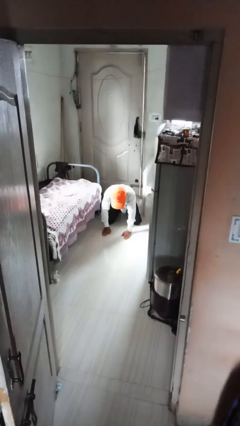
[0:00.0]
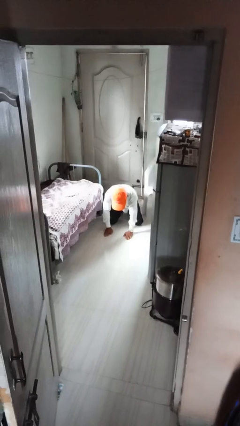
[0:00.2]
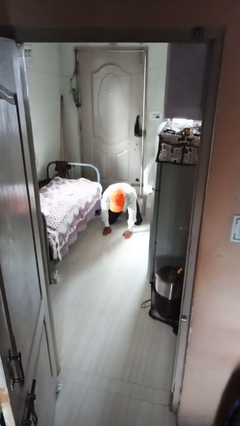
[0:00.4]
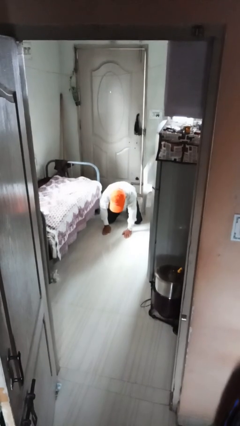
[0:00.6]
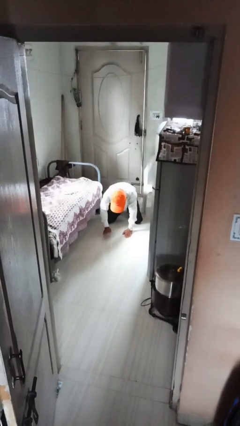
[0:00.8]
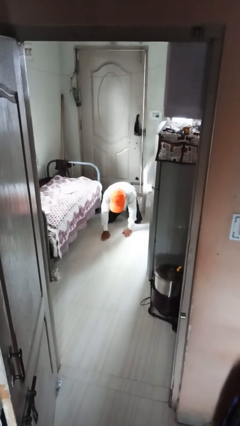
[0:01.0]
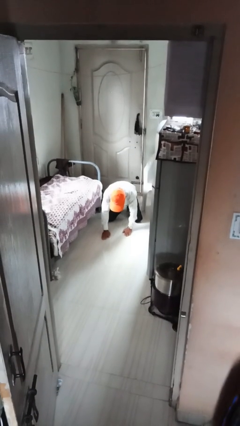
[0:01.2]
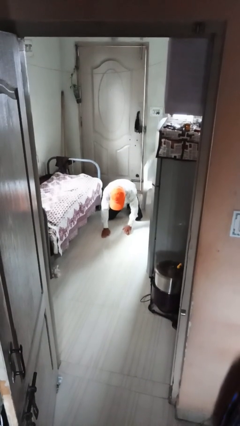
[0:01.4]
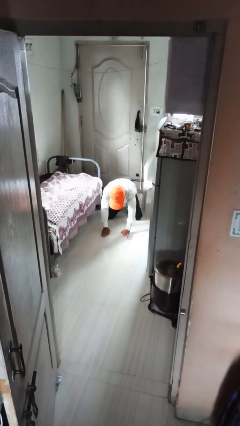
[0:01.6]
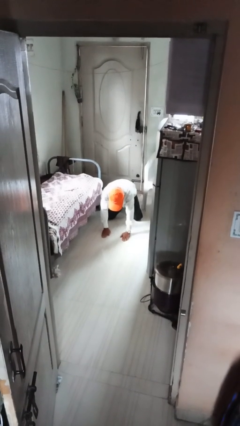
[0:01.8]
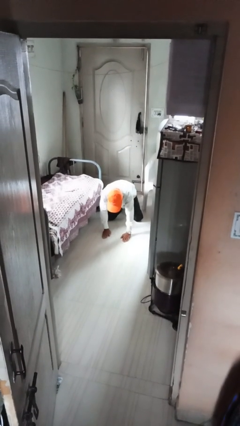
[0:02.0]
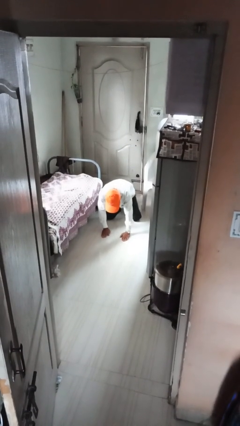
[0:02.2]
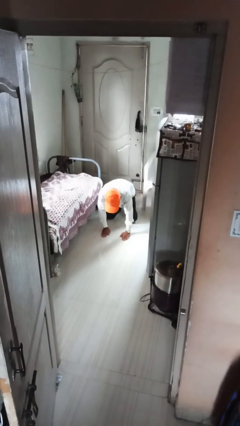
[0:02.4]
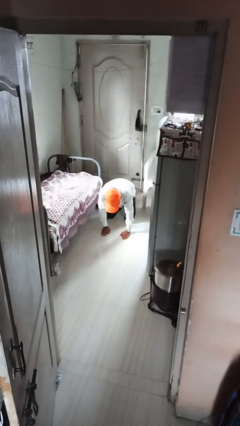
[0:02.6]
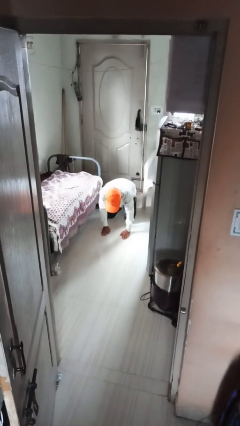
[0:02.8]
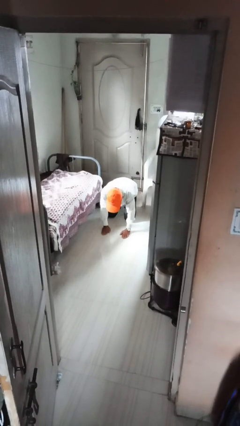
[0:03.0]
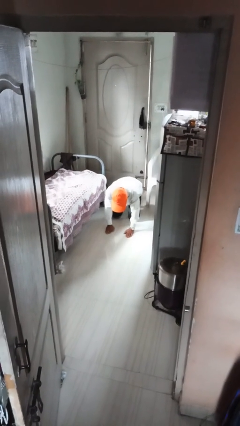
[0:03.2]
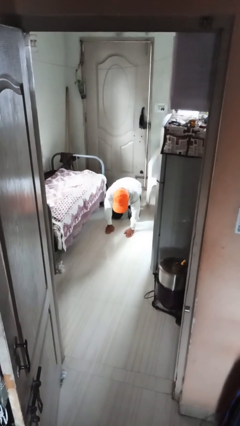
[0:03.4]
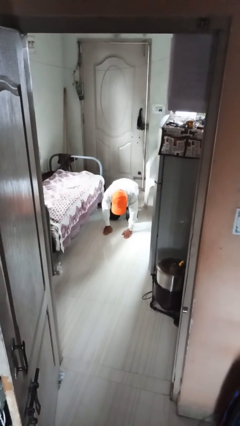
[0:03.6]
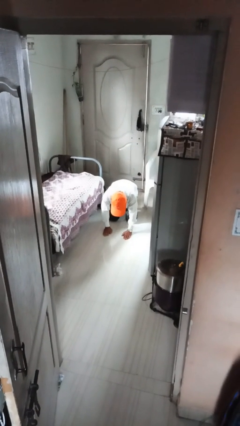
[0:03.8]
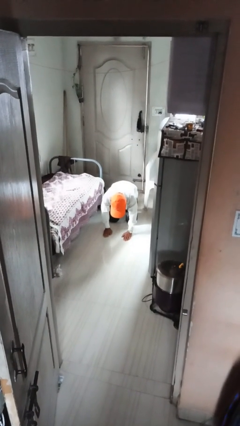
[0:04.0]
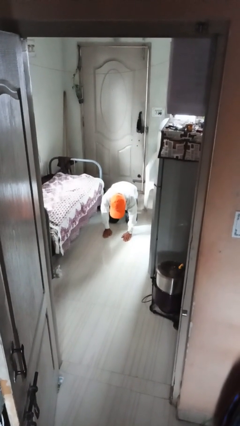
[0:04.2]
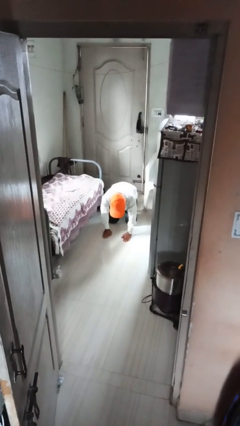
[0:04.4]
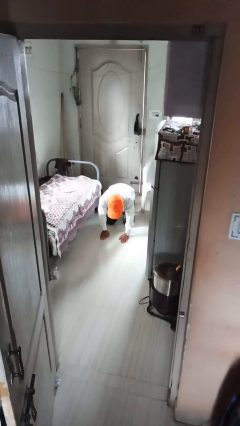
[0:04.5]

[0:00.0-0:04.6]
person crawls

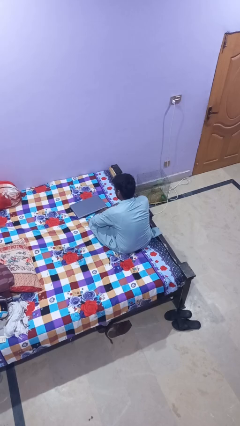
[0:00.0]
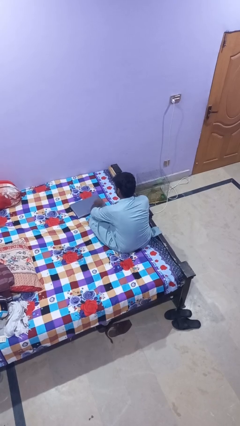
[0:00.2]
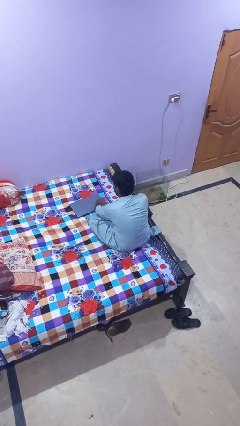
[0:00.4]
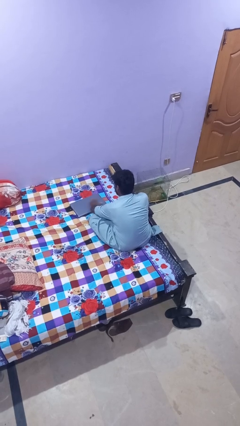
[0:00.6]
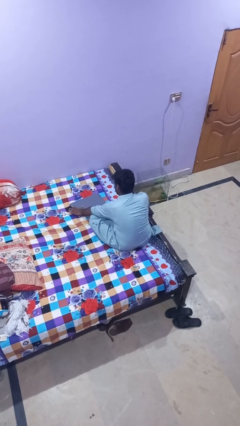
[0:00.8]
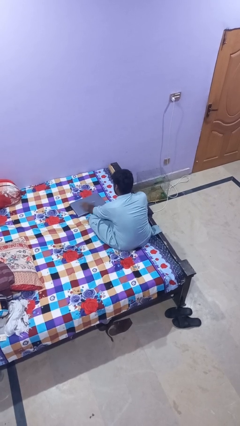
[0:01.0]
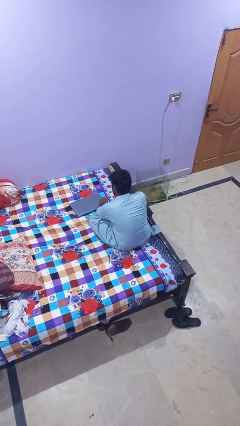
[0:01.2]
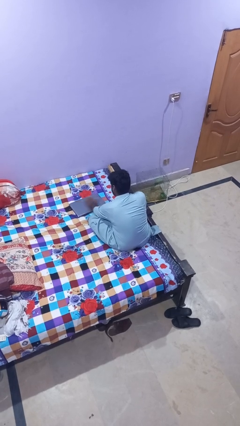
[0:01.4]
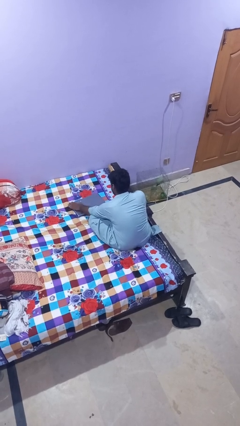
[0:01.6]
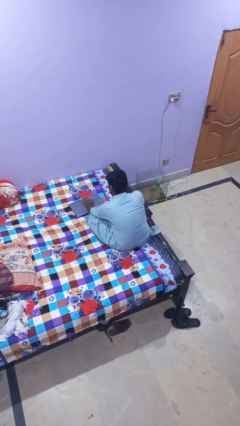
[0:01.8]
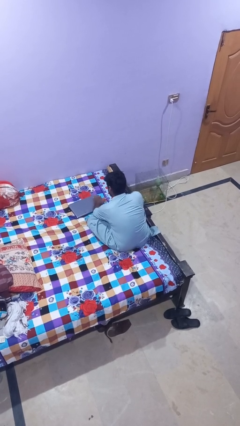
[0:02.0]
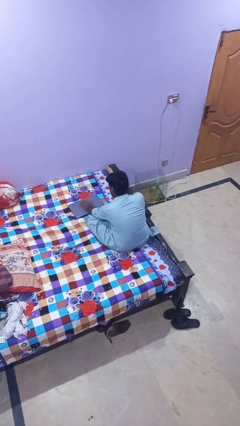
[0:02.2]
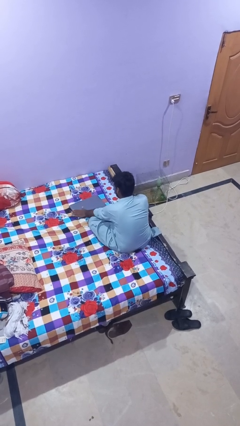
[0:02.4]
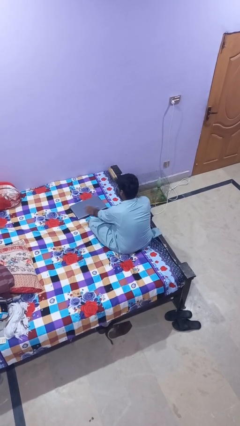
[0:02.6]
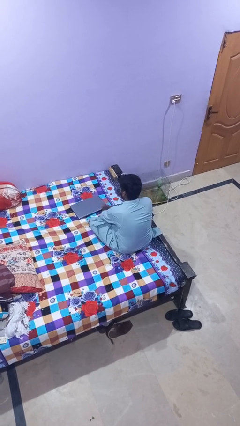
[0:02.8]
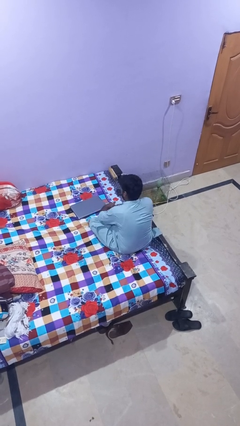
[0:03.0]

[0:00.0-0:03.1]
person waves hand over object

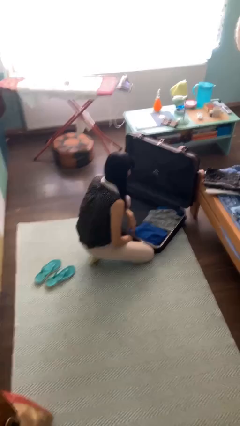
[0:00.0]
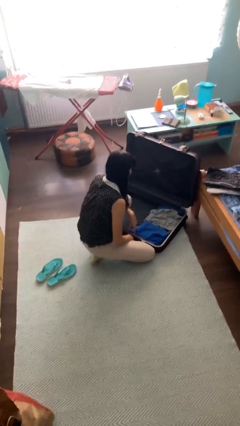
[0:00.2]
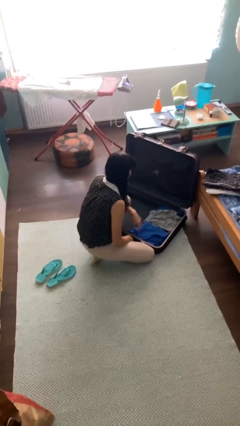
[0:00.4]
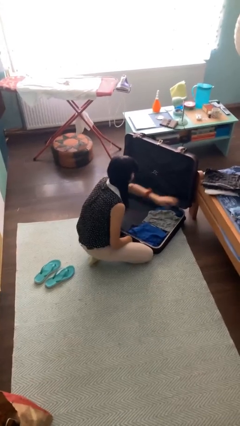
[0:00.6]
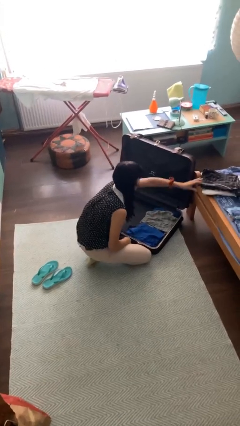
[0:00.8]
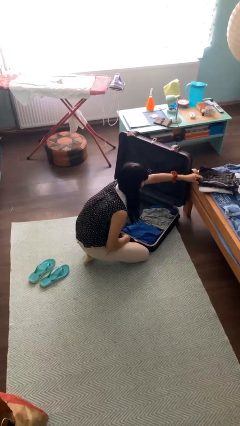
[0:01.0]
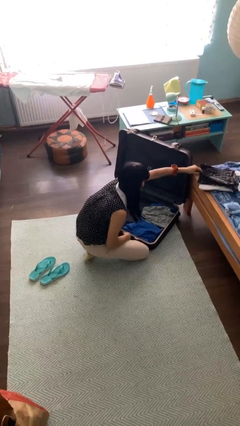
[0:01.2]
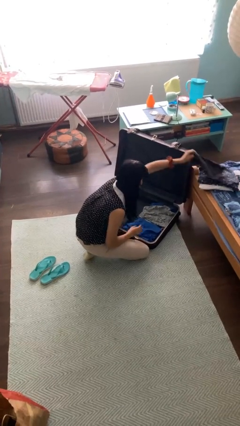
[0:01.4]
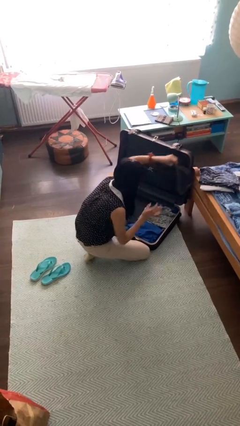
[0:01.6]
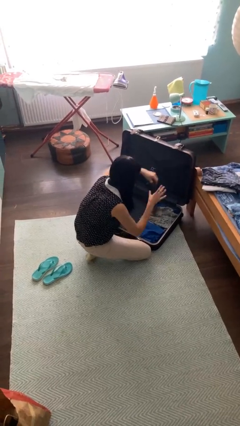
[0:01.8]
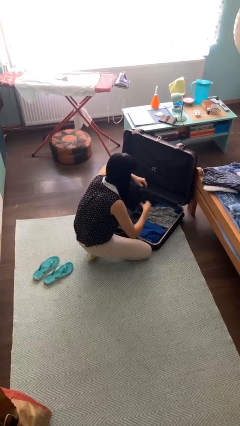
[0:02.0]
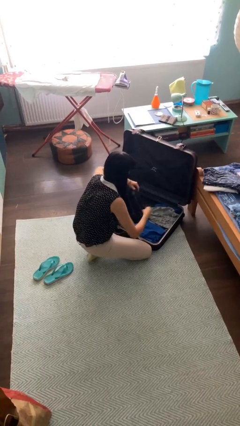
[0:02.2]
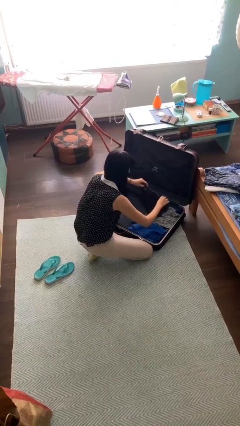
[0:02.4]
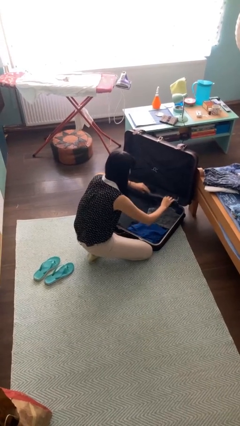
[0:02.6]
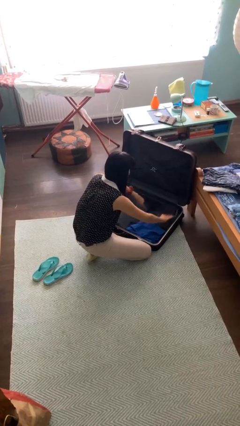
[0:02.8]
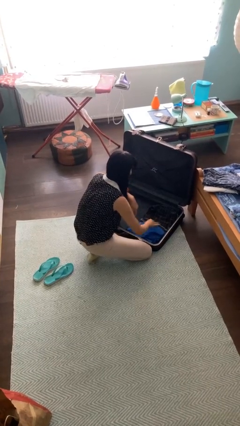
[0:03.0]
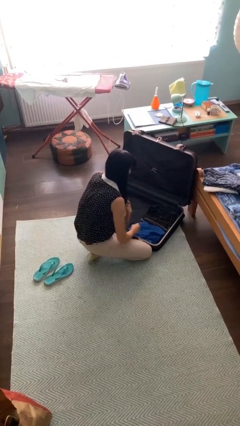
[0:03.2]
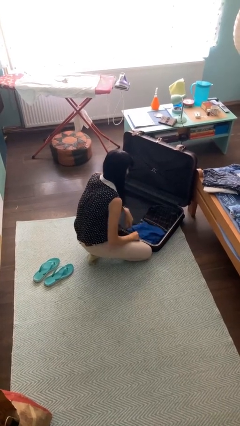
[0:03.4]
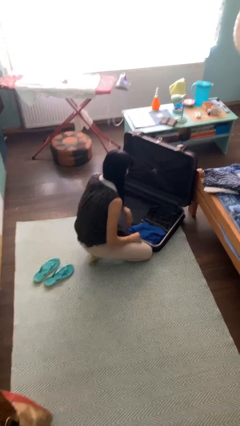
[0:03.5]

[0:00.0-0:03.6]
person loads clothes into suitcase

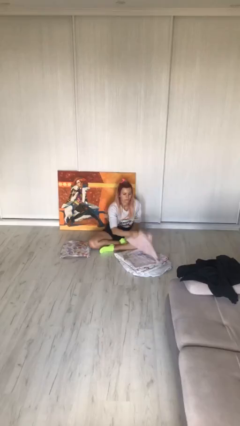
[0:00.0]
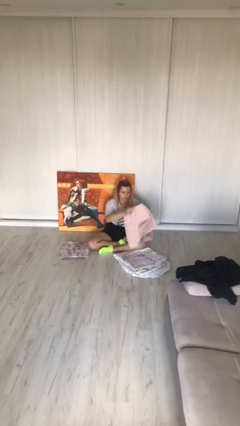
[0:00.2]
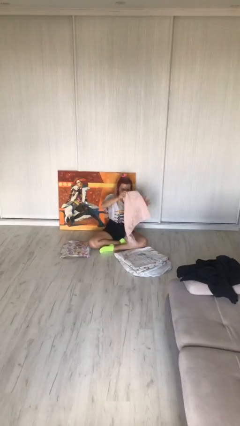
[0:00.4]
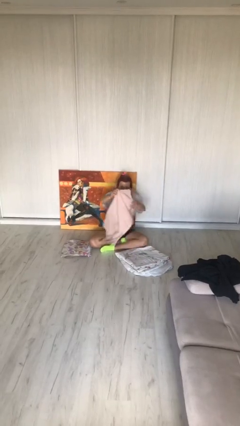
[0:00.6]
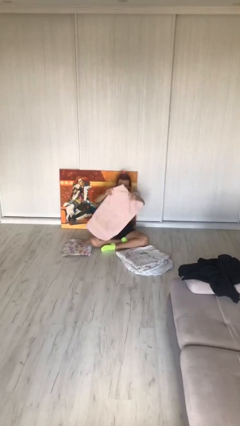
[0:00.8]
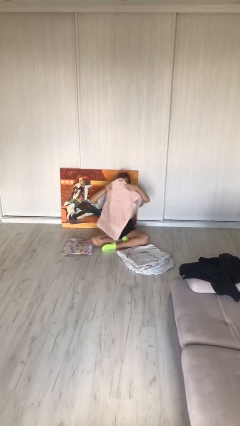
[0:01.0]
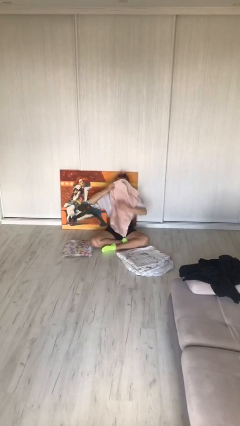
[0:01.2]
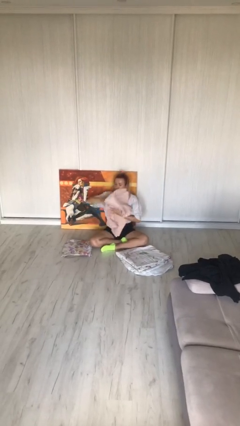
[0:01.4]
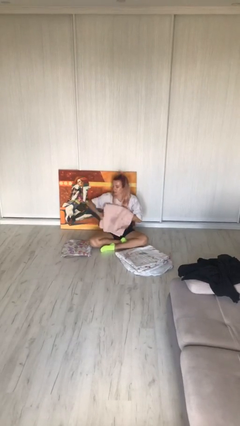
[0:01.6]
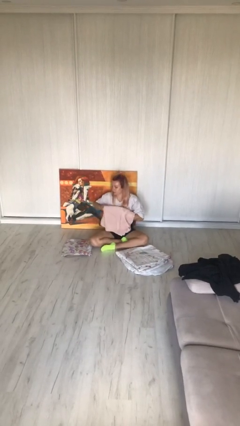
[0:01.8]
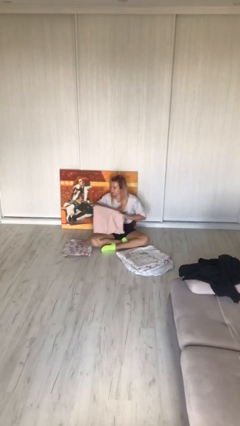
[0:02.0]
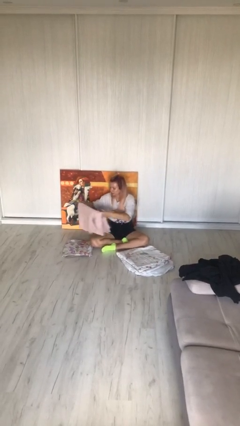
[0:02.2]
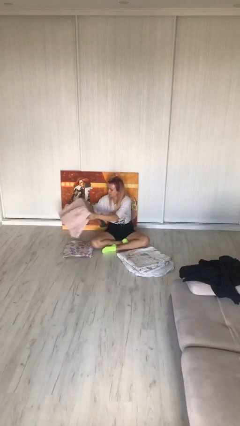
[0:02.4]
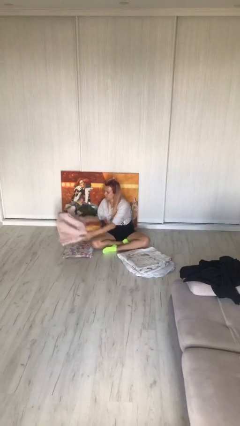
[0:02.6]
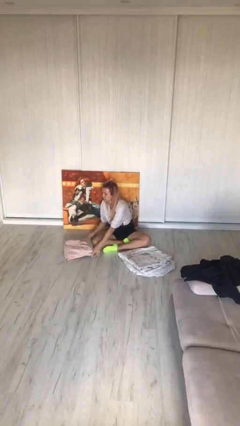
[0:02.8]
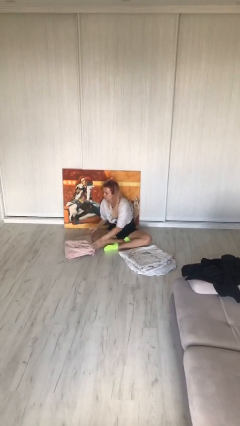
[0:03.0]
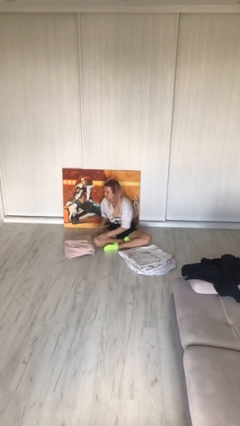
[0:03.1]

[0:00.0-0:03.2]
person folds towel

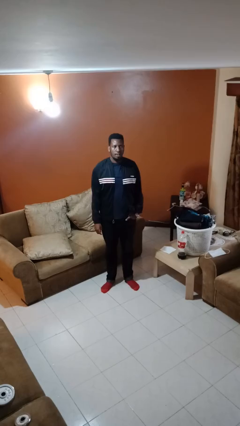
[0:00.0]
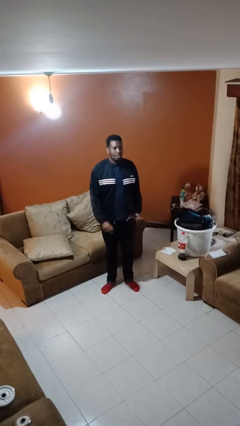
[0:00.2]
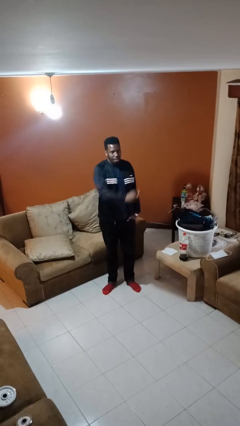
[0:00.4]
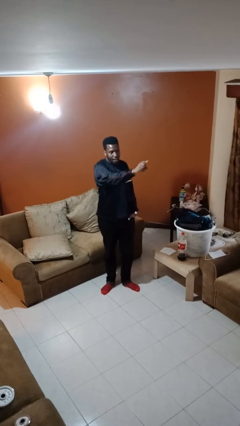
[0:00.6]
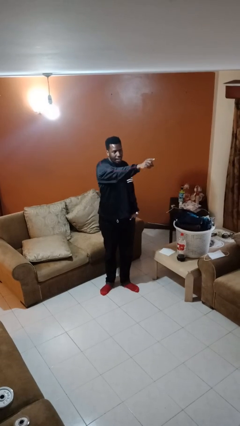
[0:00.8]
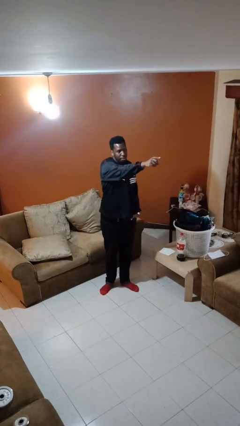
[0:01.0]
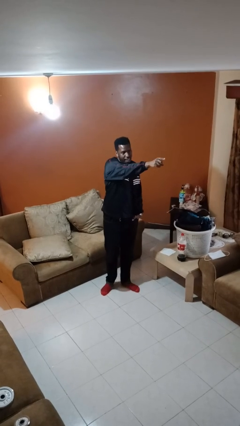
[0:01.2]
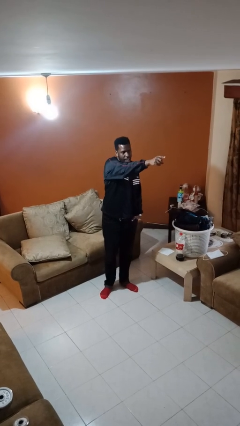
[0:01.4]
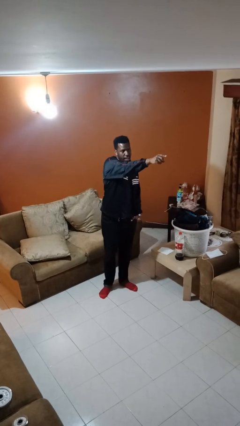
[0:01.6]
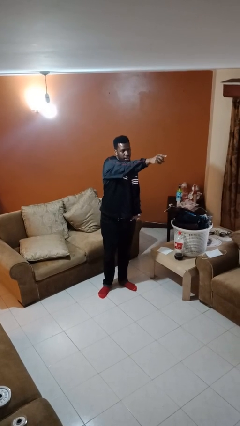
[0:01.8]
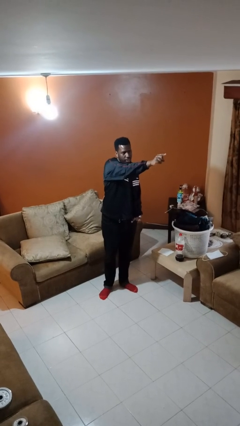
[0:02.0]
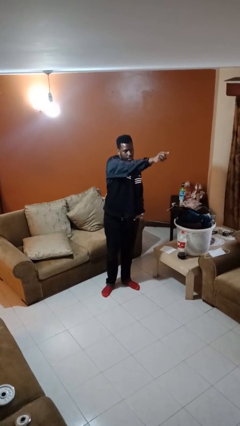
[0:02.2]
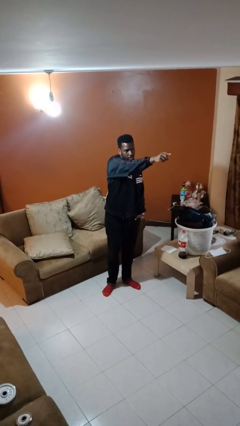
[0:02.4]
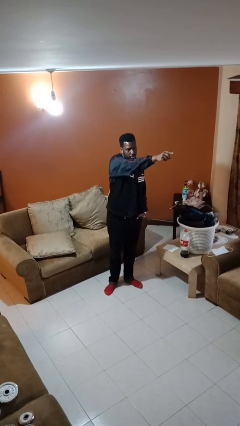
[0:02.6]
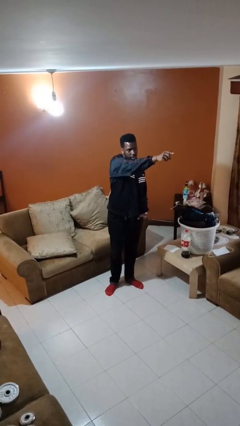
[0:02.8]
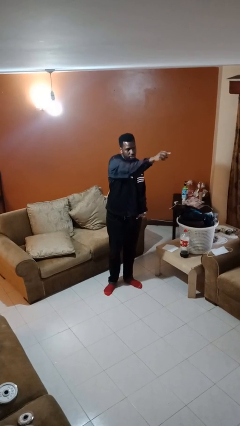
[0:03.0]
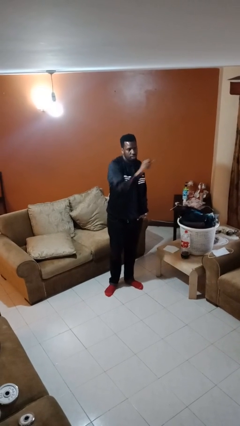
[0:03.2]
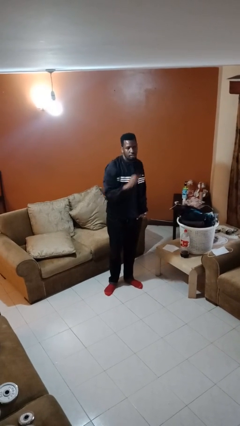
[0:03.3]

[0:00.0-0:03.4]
person points at person
